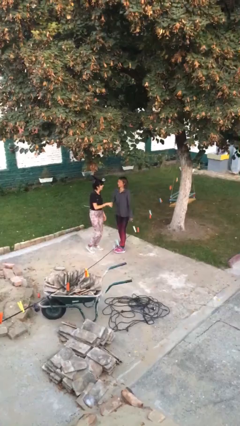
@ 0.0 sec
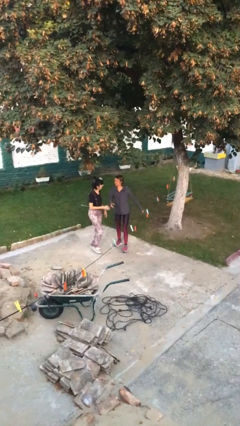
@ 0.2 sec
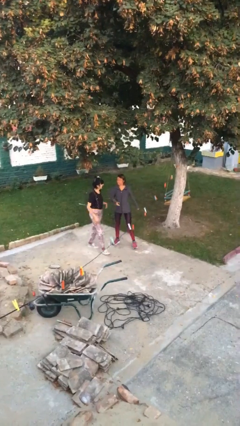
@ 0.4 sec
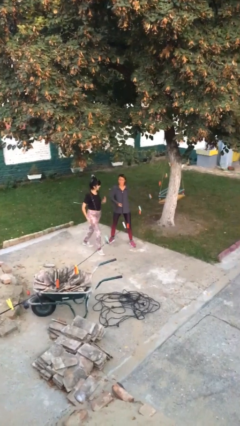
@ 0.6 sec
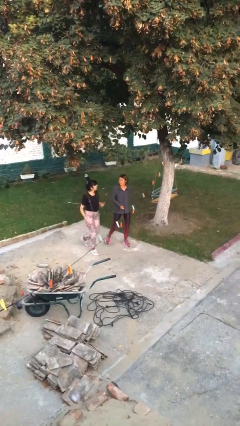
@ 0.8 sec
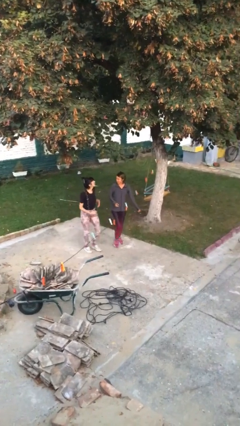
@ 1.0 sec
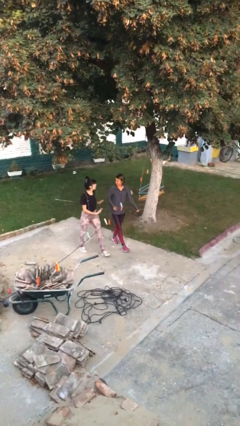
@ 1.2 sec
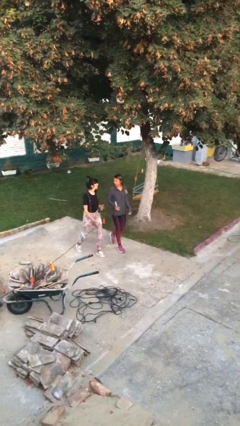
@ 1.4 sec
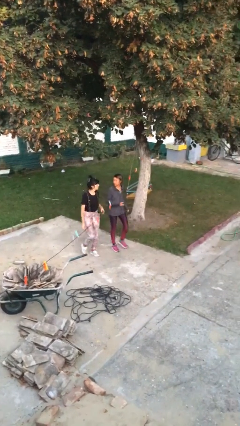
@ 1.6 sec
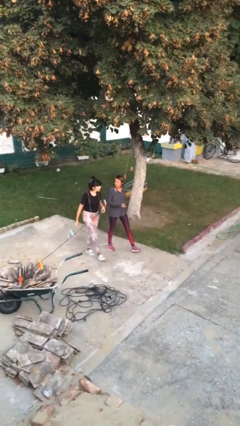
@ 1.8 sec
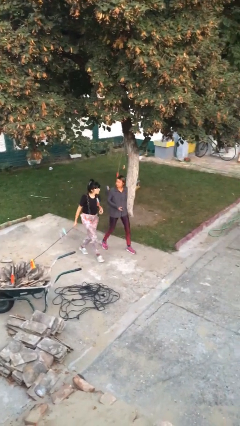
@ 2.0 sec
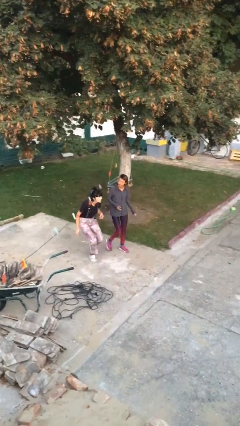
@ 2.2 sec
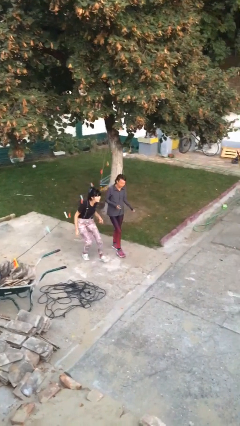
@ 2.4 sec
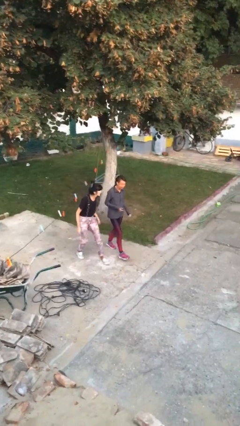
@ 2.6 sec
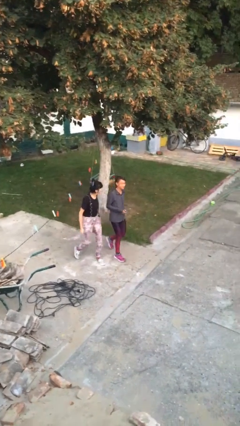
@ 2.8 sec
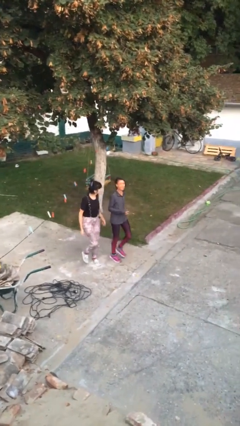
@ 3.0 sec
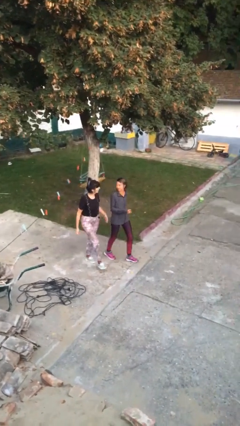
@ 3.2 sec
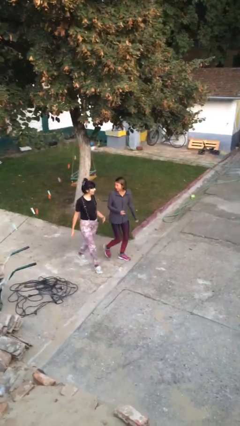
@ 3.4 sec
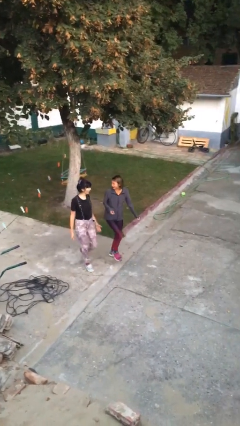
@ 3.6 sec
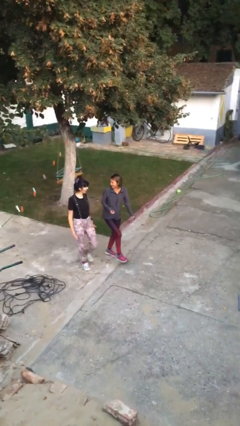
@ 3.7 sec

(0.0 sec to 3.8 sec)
person talks to person

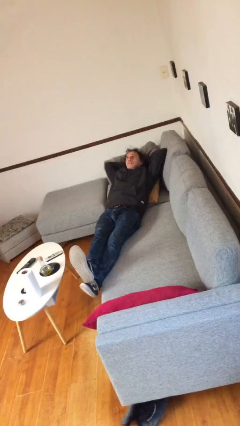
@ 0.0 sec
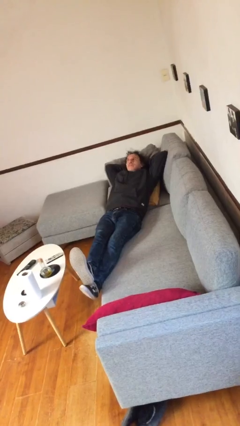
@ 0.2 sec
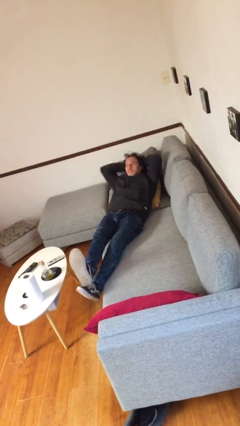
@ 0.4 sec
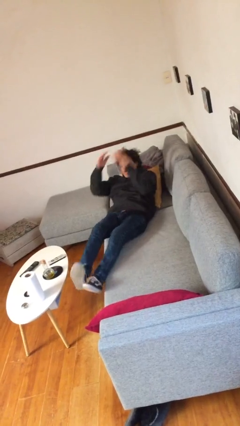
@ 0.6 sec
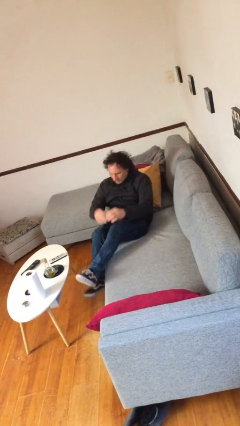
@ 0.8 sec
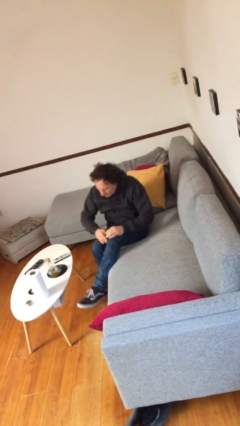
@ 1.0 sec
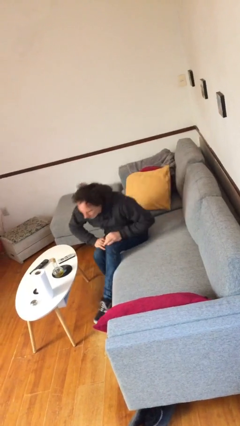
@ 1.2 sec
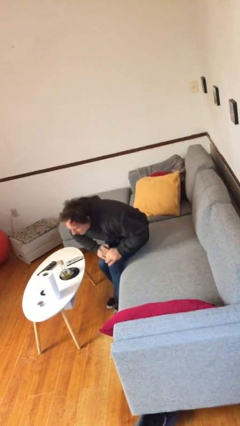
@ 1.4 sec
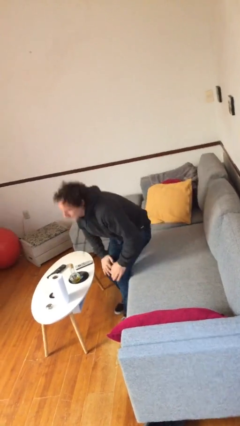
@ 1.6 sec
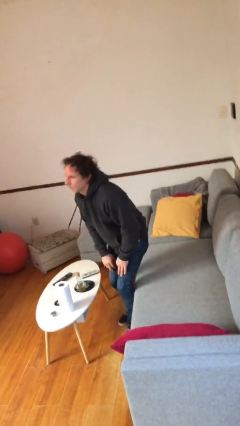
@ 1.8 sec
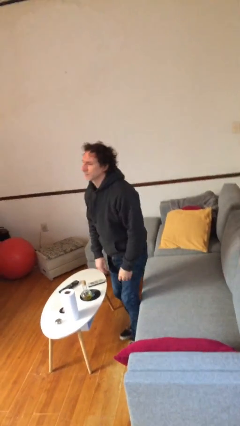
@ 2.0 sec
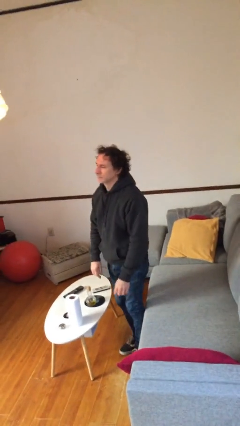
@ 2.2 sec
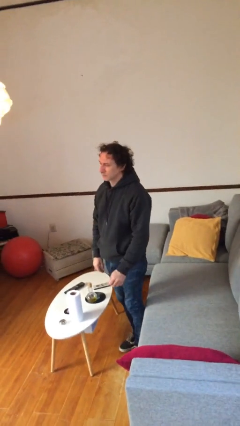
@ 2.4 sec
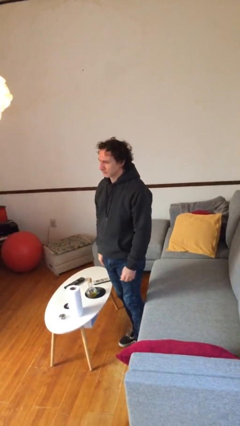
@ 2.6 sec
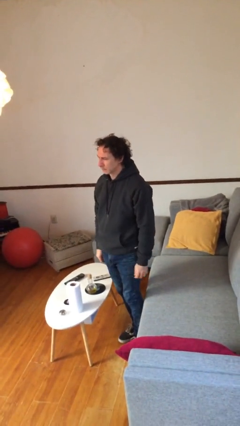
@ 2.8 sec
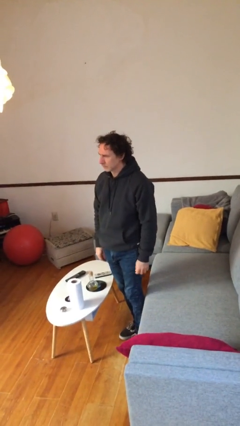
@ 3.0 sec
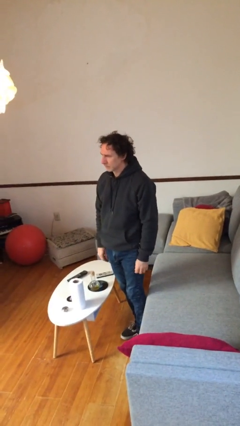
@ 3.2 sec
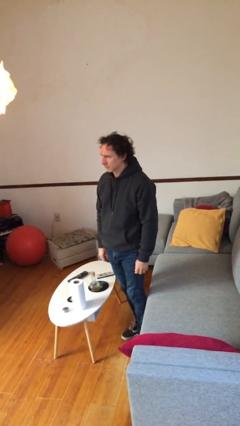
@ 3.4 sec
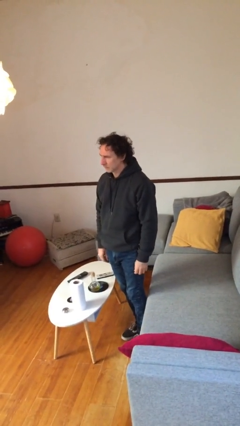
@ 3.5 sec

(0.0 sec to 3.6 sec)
person stands up

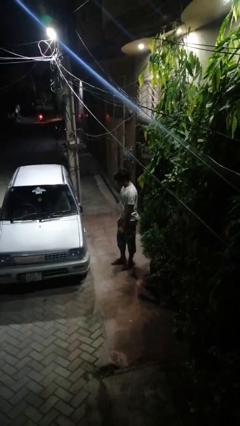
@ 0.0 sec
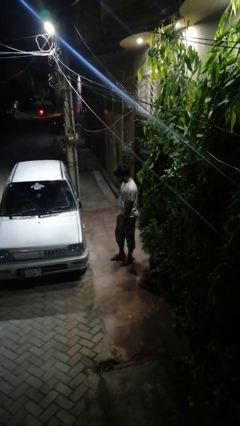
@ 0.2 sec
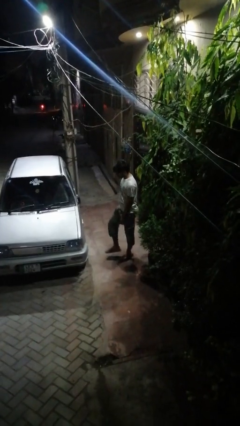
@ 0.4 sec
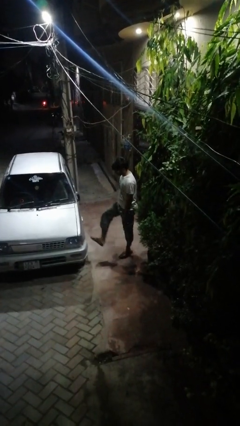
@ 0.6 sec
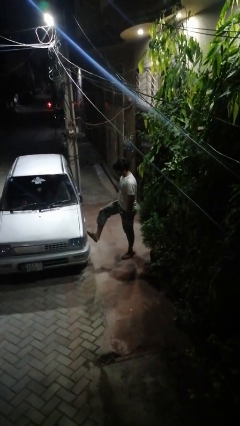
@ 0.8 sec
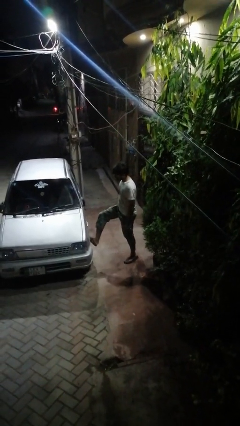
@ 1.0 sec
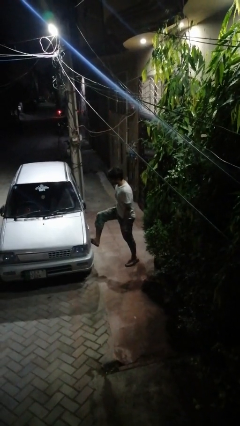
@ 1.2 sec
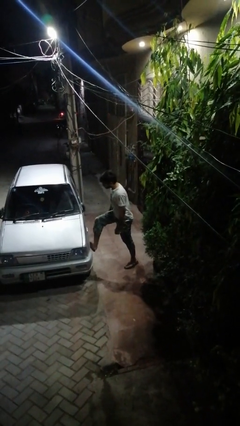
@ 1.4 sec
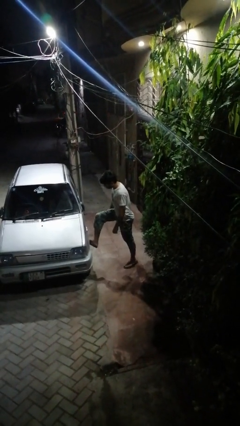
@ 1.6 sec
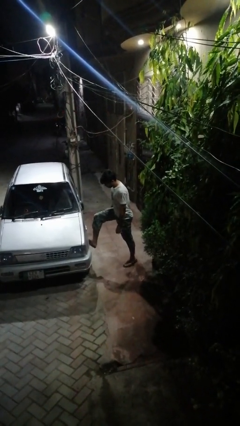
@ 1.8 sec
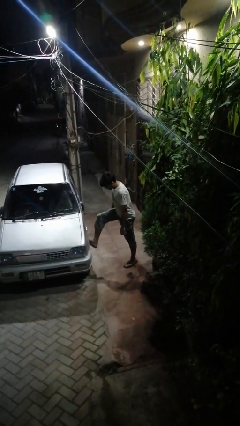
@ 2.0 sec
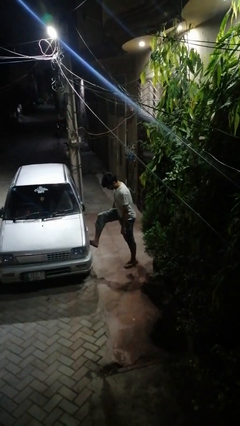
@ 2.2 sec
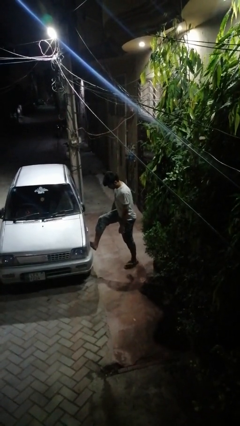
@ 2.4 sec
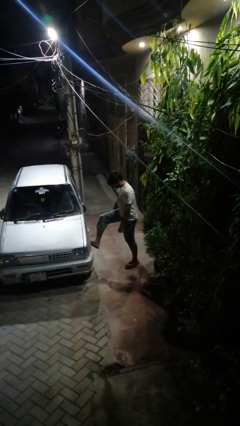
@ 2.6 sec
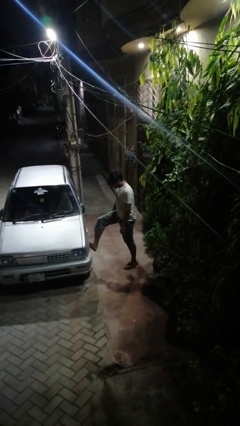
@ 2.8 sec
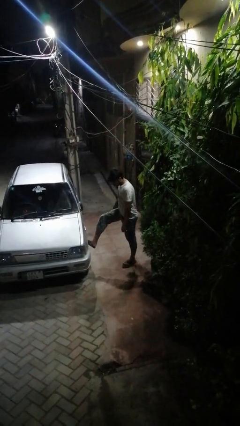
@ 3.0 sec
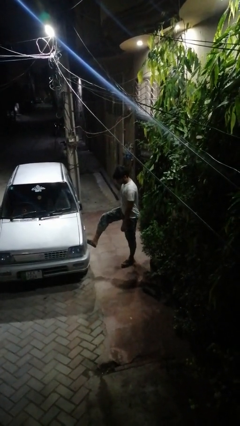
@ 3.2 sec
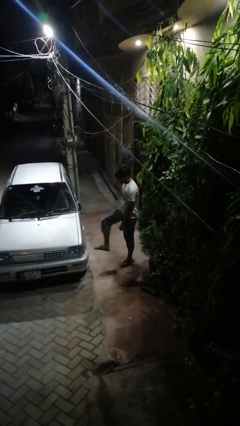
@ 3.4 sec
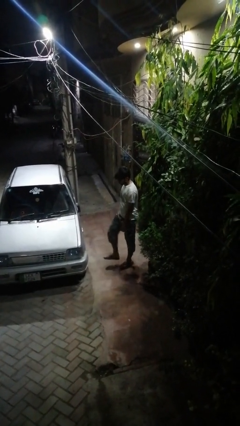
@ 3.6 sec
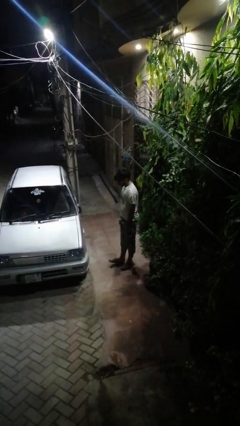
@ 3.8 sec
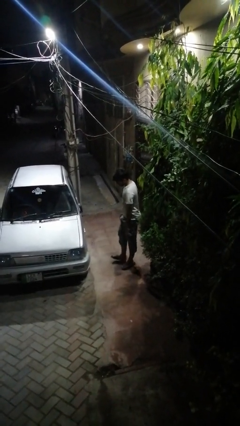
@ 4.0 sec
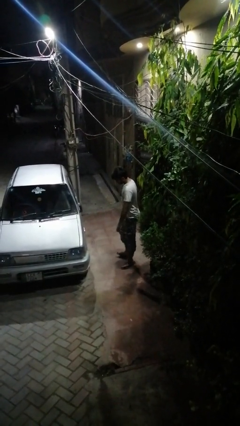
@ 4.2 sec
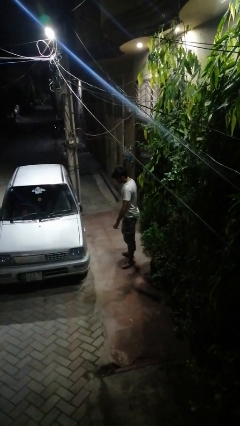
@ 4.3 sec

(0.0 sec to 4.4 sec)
person kicks car tires

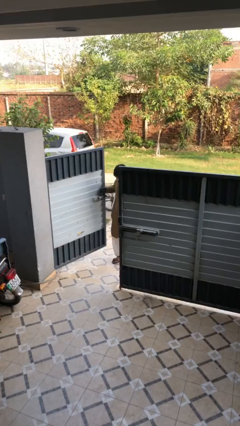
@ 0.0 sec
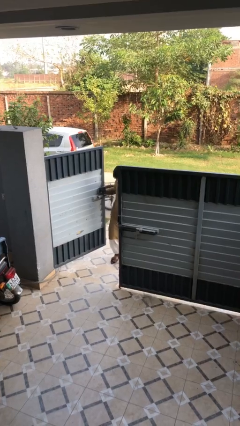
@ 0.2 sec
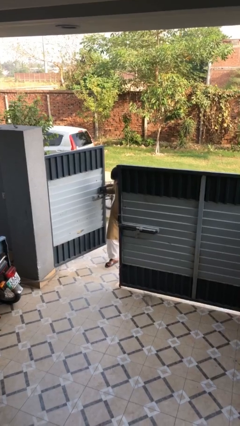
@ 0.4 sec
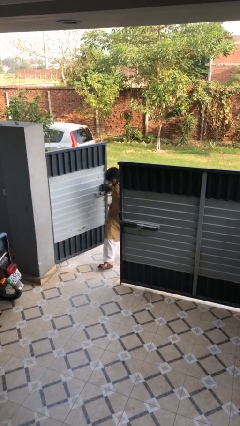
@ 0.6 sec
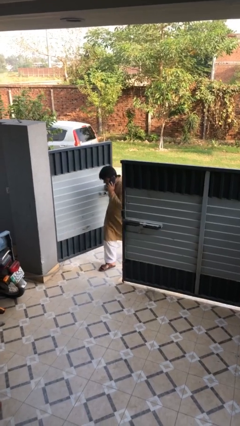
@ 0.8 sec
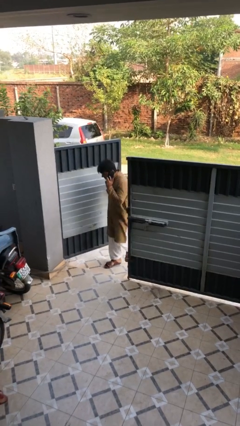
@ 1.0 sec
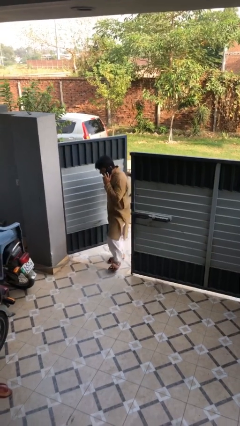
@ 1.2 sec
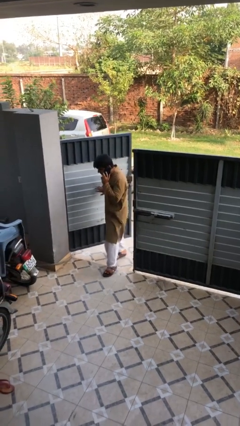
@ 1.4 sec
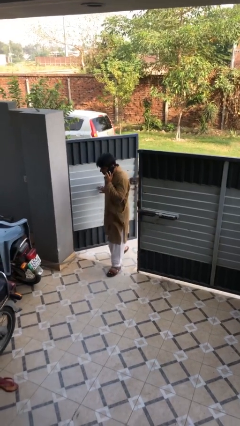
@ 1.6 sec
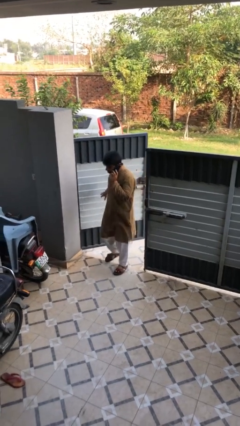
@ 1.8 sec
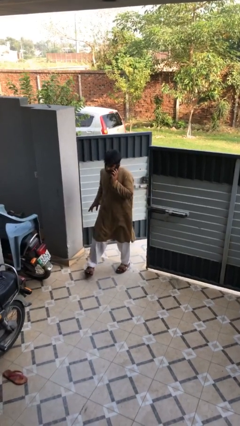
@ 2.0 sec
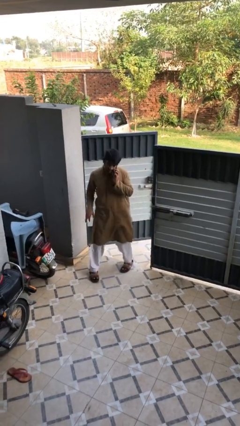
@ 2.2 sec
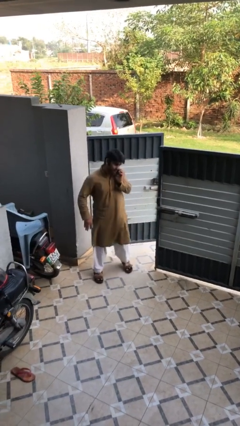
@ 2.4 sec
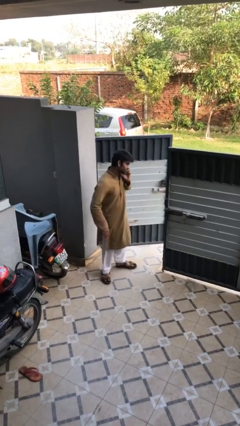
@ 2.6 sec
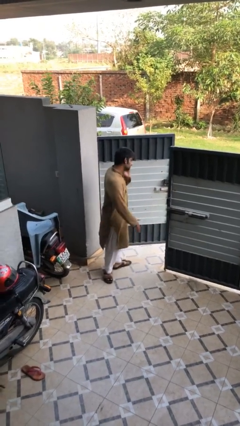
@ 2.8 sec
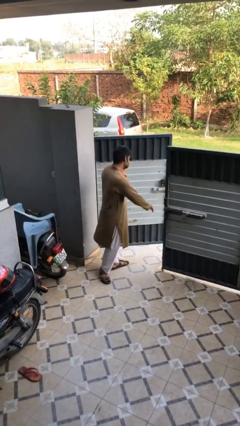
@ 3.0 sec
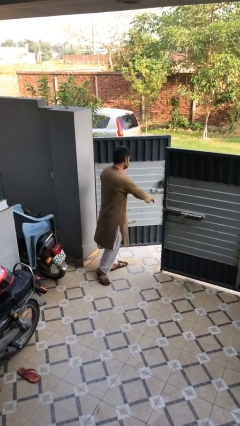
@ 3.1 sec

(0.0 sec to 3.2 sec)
person enters scene through structure

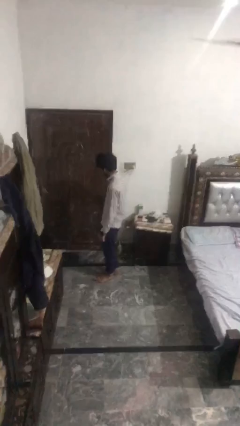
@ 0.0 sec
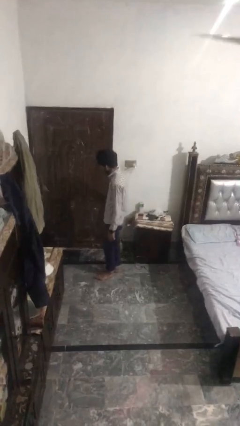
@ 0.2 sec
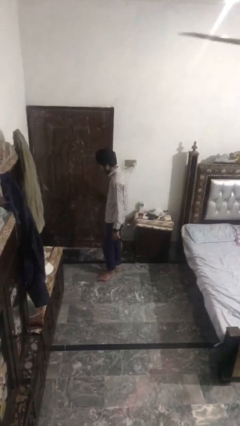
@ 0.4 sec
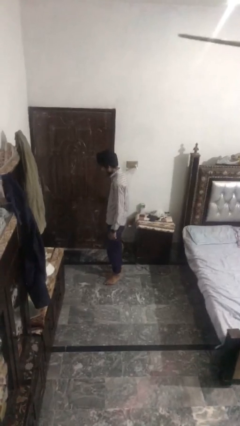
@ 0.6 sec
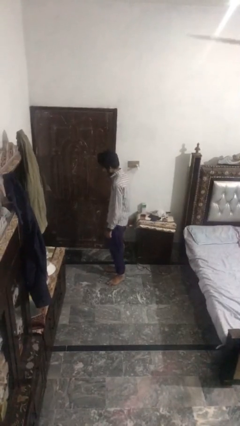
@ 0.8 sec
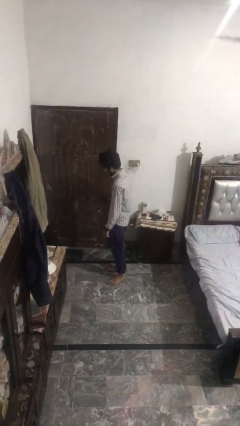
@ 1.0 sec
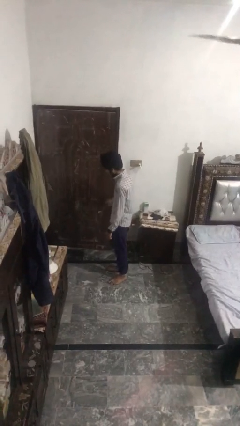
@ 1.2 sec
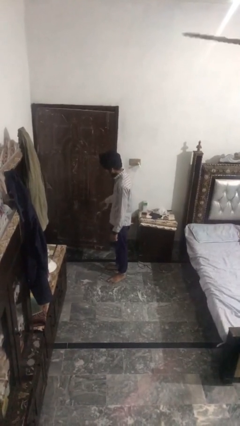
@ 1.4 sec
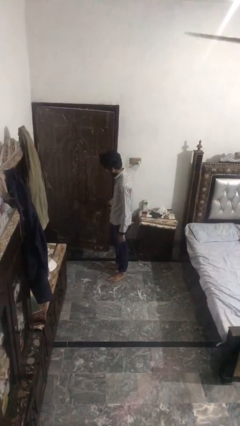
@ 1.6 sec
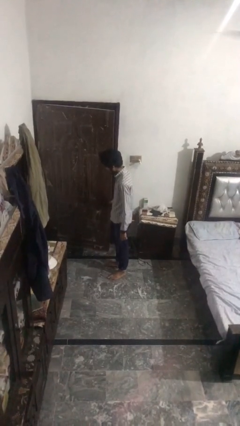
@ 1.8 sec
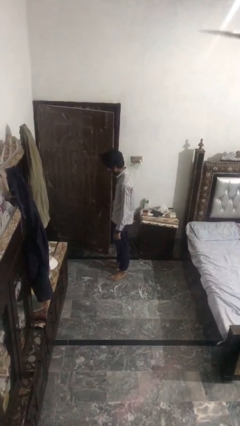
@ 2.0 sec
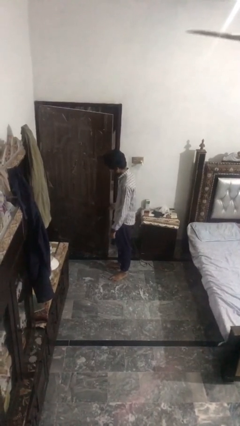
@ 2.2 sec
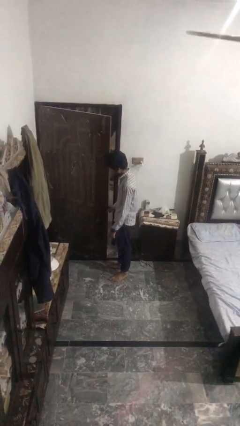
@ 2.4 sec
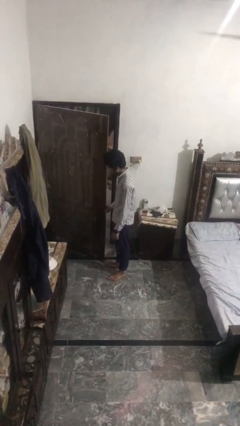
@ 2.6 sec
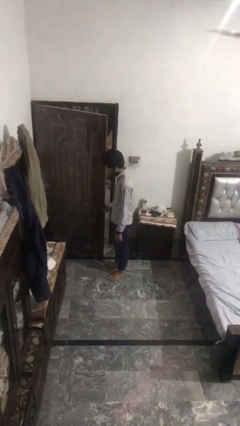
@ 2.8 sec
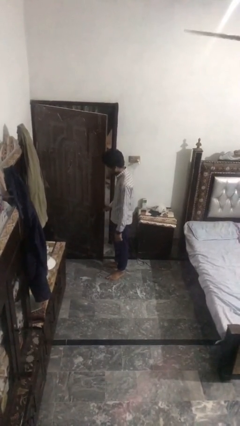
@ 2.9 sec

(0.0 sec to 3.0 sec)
person opens facility door
